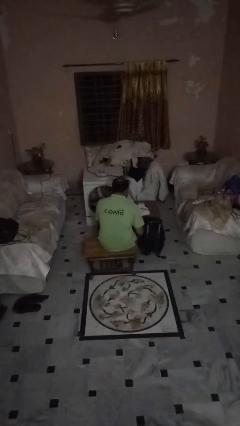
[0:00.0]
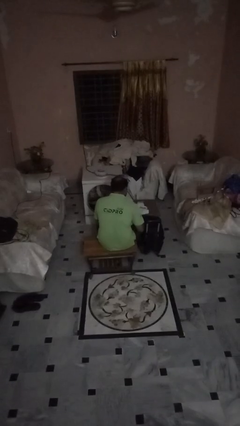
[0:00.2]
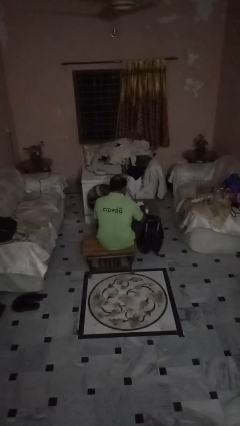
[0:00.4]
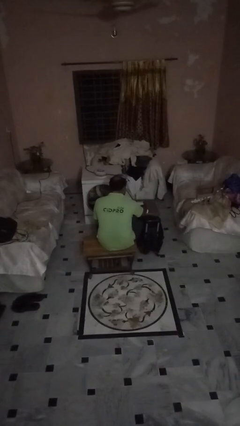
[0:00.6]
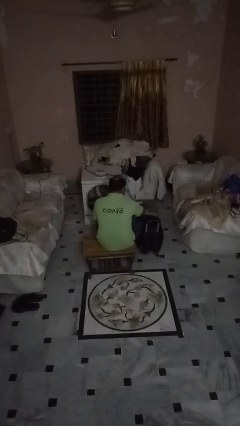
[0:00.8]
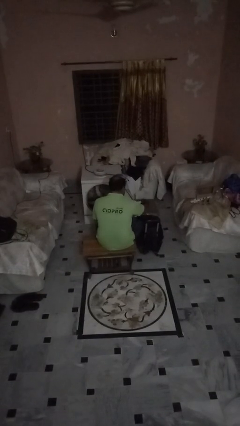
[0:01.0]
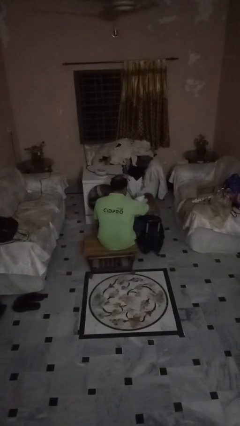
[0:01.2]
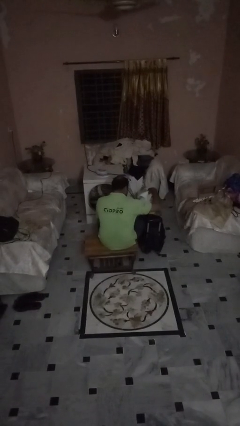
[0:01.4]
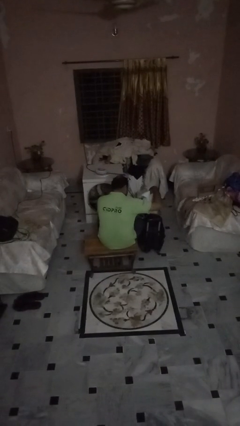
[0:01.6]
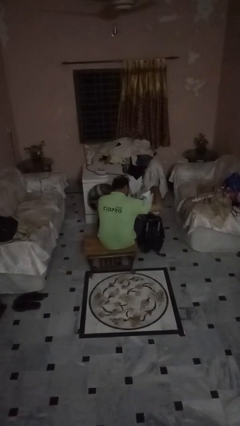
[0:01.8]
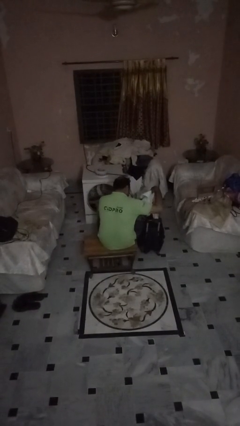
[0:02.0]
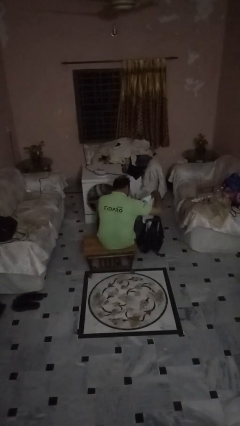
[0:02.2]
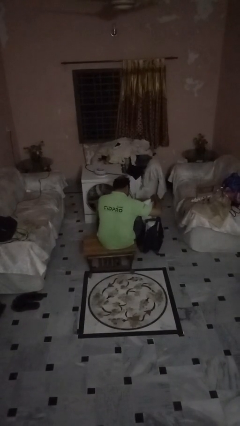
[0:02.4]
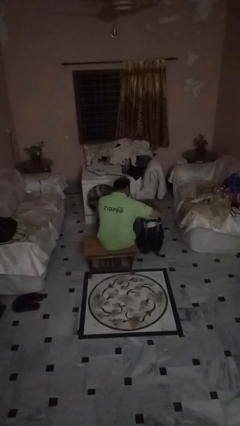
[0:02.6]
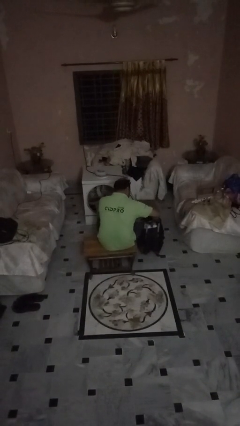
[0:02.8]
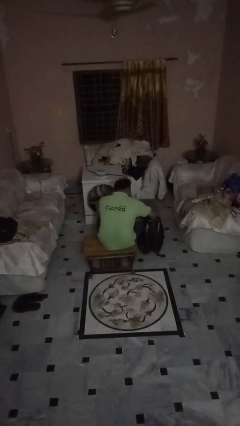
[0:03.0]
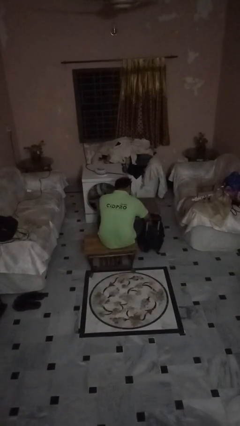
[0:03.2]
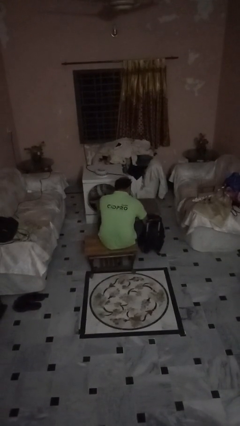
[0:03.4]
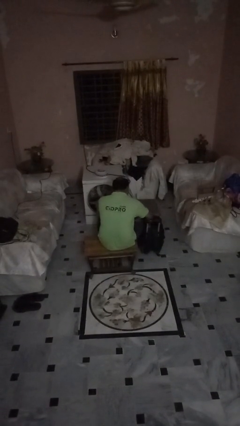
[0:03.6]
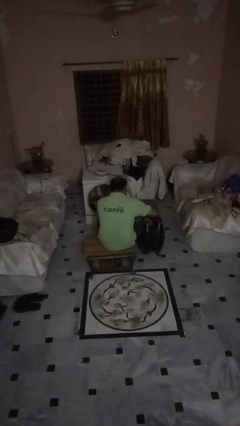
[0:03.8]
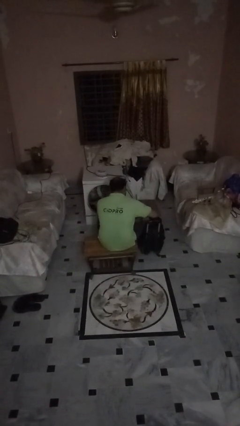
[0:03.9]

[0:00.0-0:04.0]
person loads clothes into suitcase

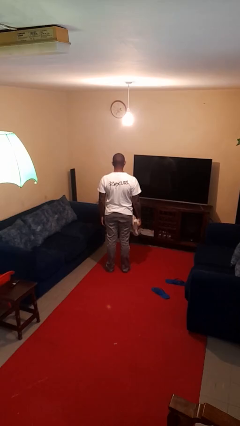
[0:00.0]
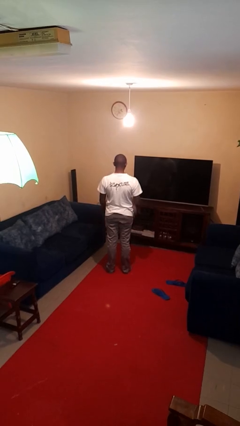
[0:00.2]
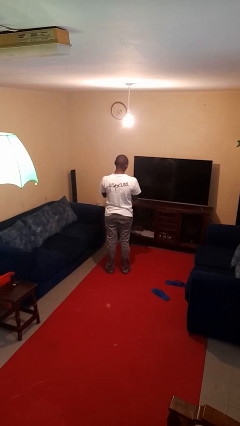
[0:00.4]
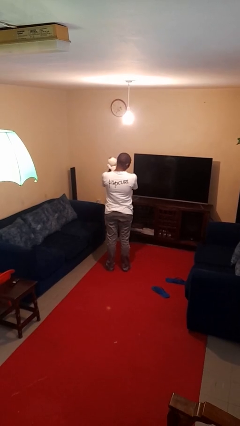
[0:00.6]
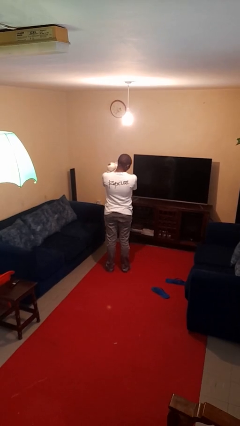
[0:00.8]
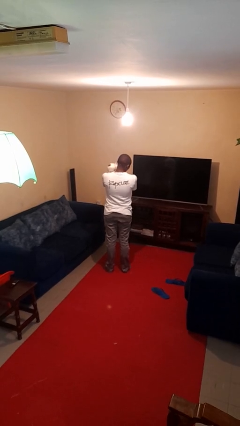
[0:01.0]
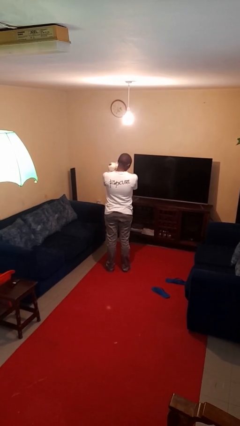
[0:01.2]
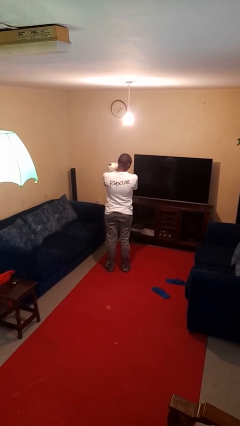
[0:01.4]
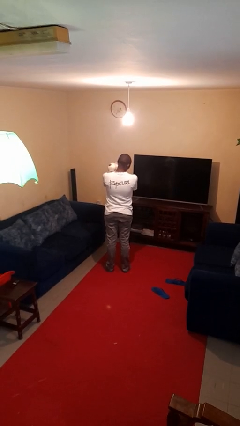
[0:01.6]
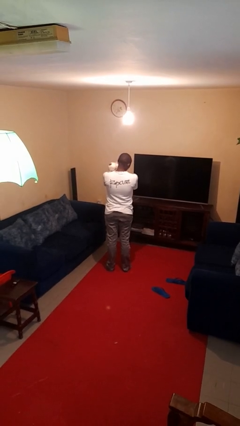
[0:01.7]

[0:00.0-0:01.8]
person hugs stuffed animal

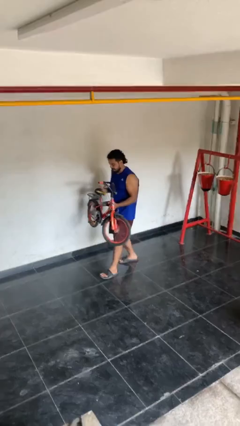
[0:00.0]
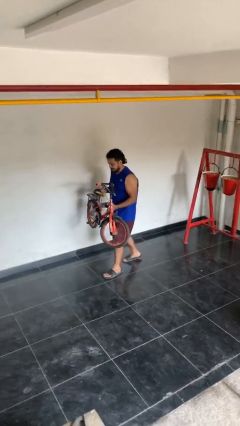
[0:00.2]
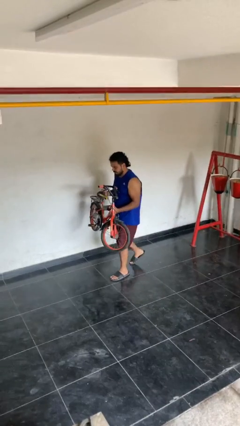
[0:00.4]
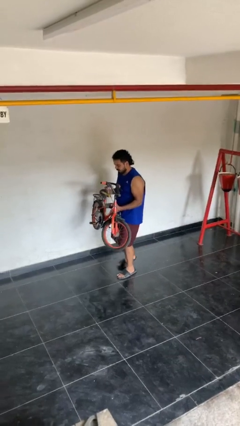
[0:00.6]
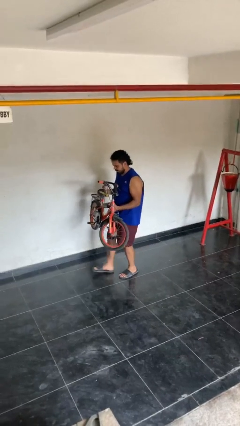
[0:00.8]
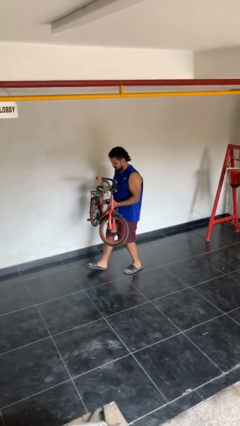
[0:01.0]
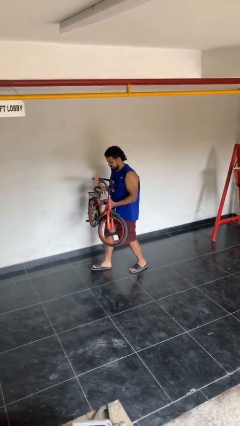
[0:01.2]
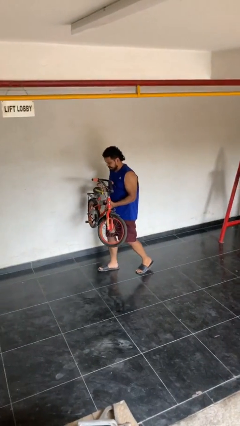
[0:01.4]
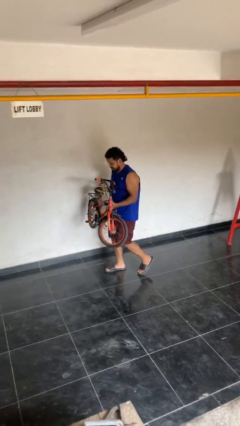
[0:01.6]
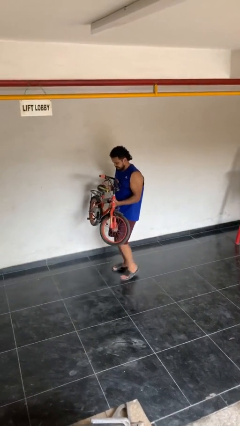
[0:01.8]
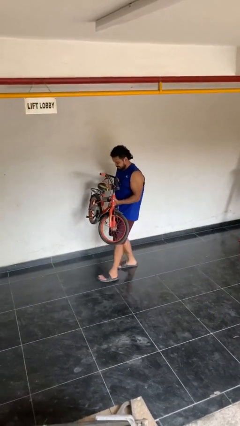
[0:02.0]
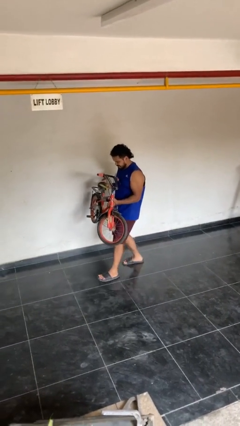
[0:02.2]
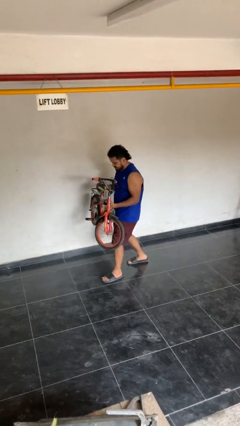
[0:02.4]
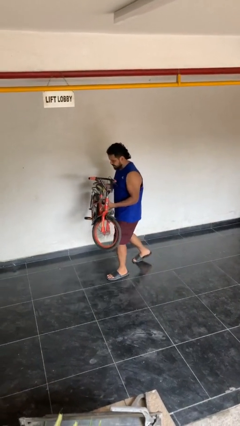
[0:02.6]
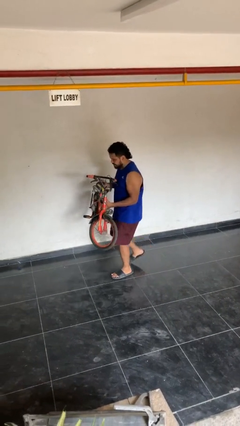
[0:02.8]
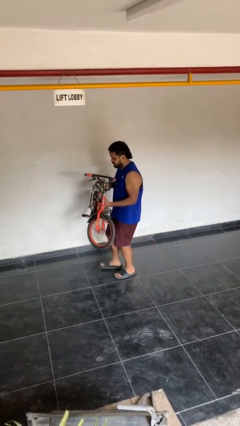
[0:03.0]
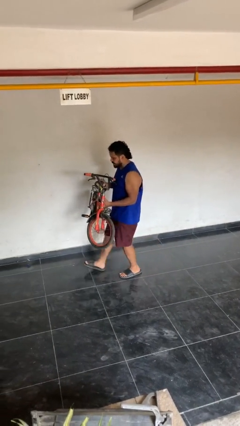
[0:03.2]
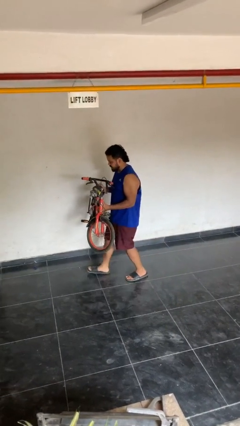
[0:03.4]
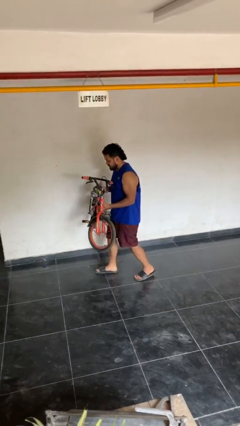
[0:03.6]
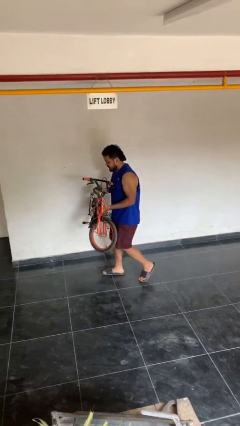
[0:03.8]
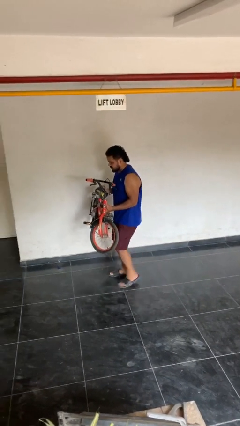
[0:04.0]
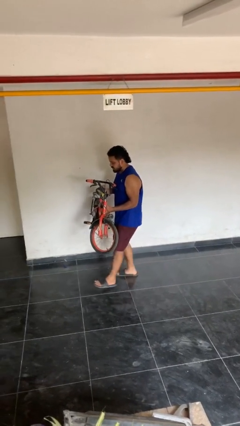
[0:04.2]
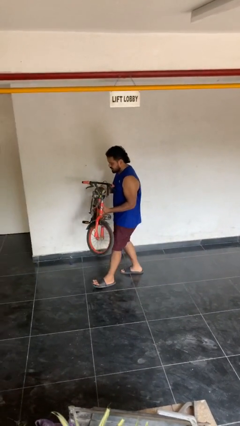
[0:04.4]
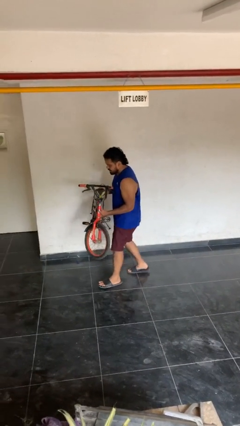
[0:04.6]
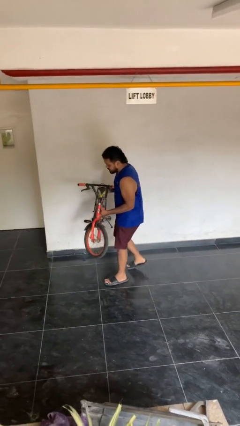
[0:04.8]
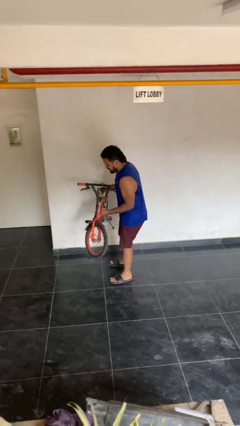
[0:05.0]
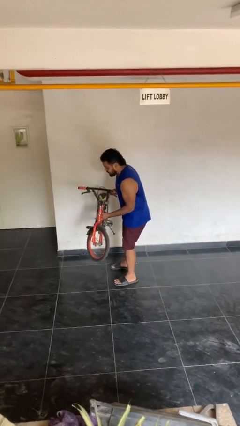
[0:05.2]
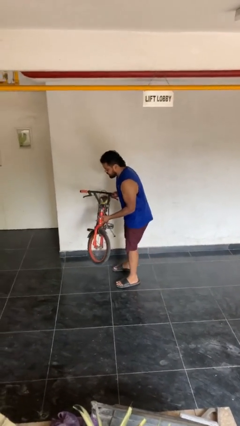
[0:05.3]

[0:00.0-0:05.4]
person carries heavy object

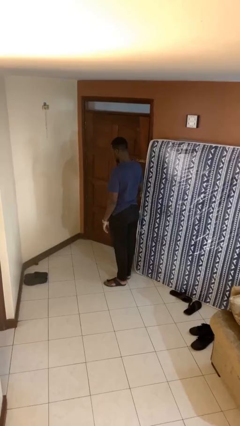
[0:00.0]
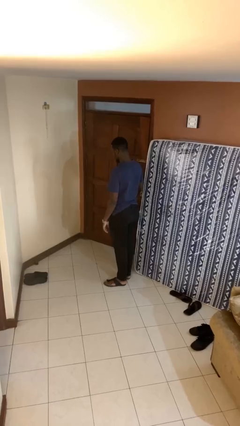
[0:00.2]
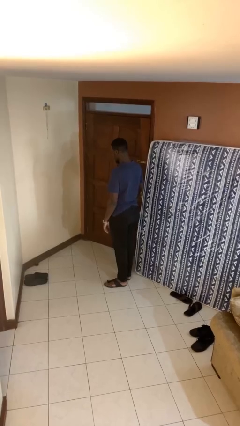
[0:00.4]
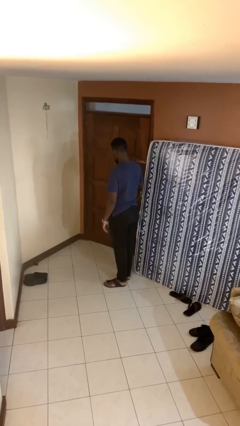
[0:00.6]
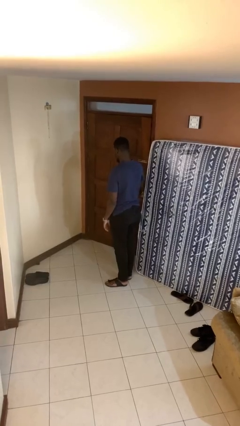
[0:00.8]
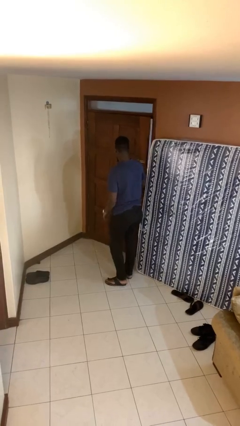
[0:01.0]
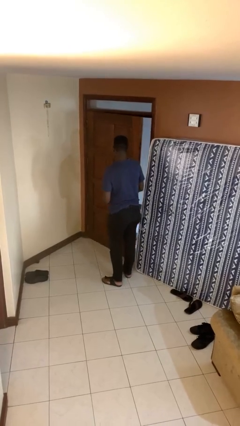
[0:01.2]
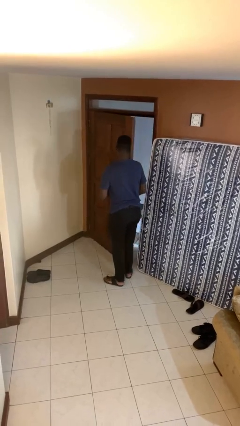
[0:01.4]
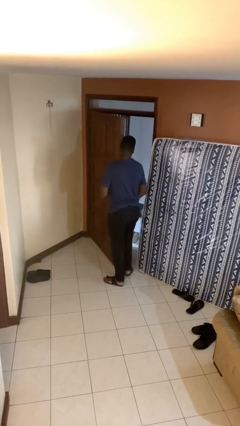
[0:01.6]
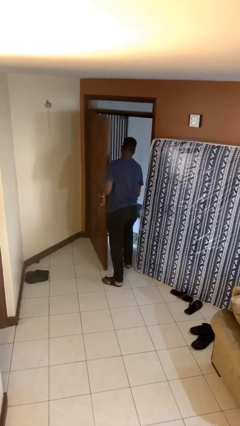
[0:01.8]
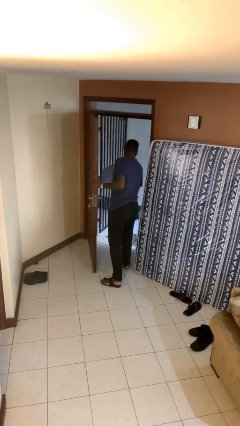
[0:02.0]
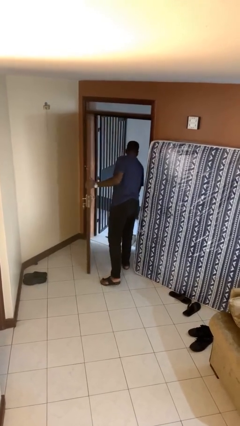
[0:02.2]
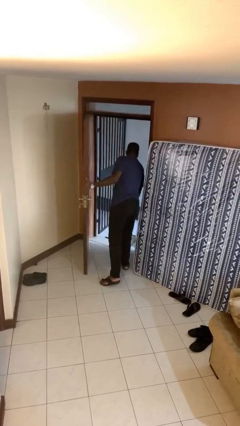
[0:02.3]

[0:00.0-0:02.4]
person opens facility door

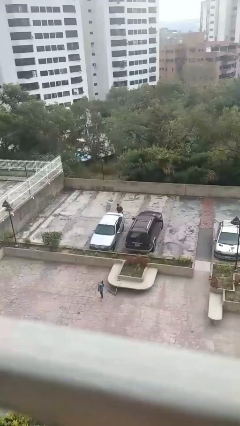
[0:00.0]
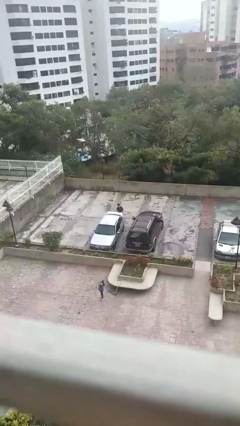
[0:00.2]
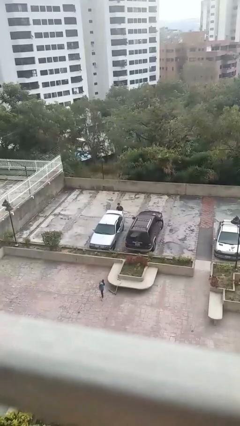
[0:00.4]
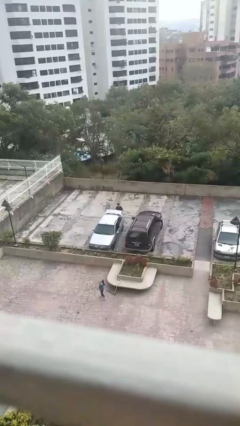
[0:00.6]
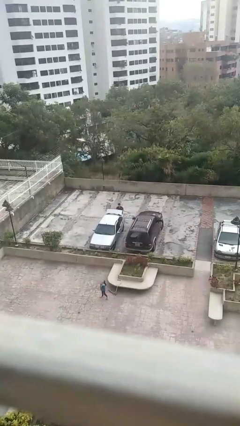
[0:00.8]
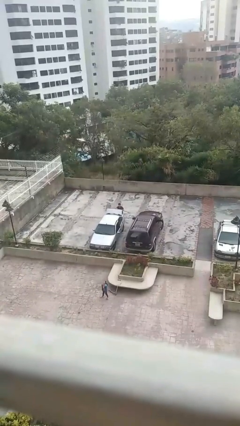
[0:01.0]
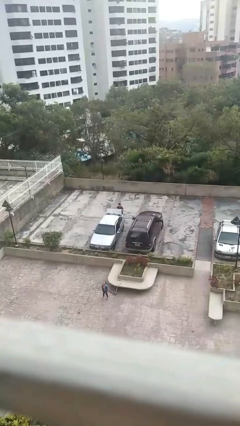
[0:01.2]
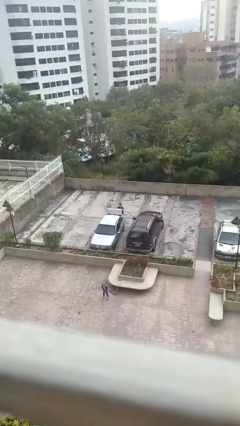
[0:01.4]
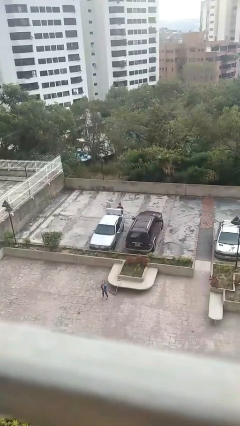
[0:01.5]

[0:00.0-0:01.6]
person opens car trunk

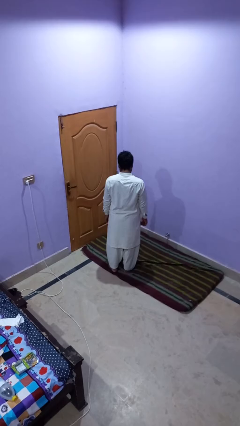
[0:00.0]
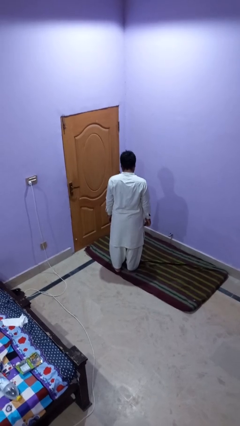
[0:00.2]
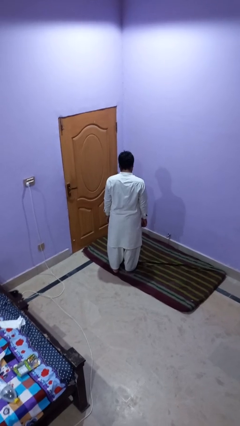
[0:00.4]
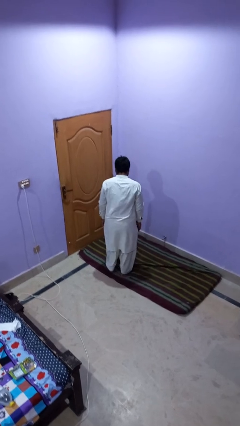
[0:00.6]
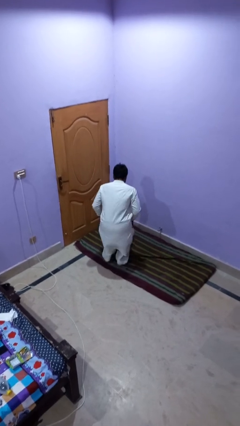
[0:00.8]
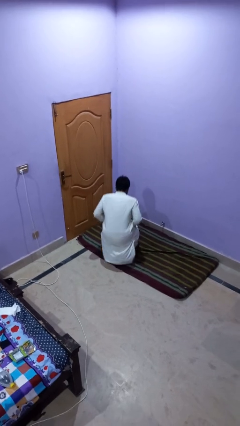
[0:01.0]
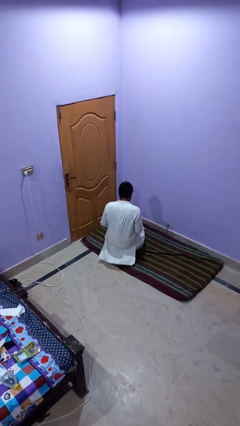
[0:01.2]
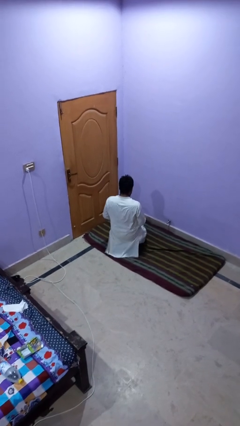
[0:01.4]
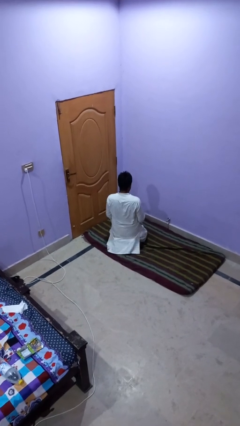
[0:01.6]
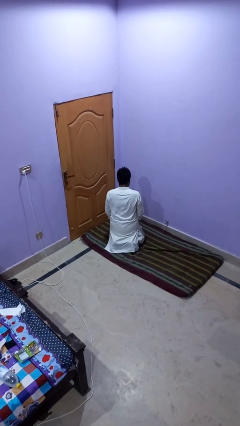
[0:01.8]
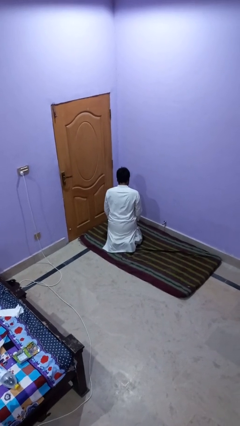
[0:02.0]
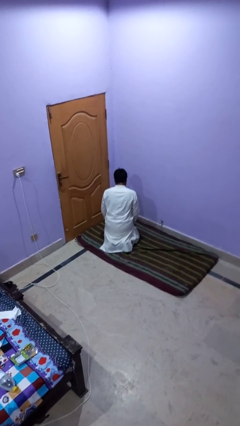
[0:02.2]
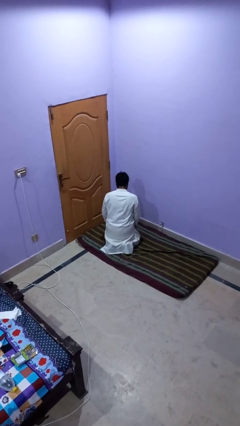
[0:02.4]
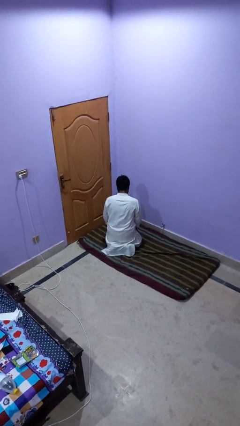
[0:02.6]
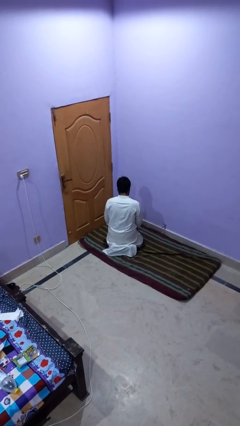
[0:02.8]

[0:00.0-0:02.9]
person kneels
